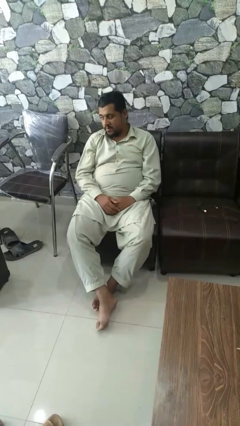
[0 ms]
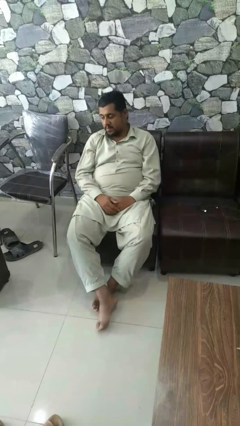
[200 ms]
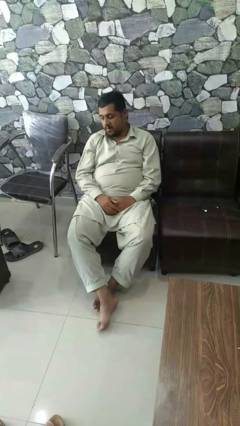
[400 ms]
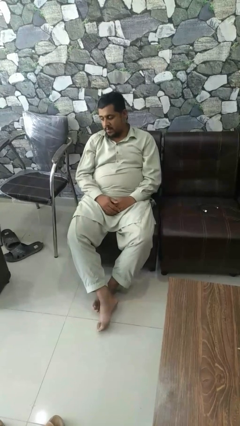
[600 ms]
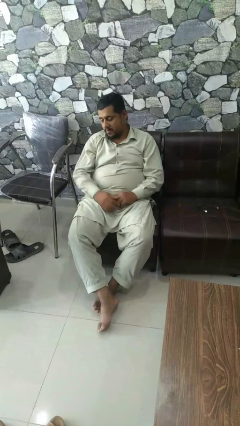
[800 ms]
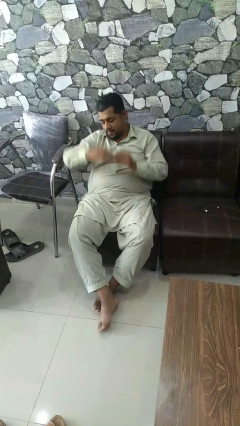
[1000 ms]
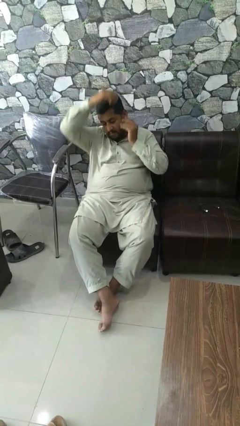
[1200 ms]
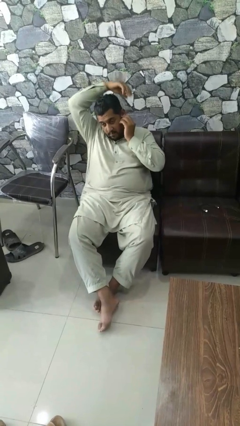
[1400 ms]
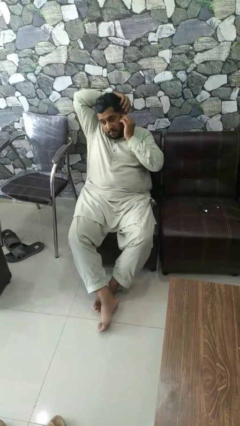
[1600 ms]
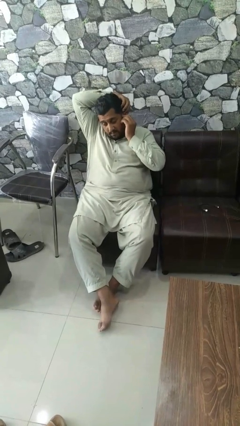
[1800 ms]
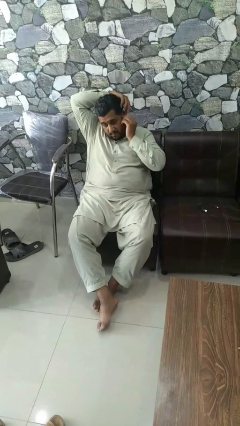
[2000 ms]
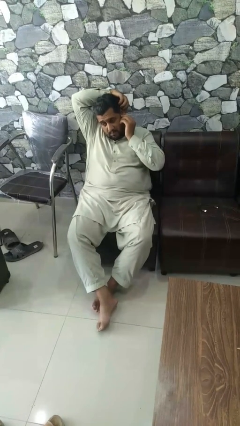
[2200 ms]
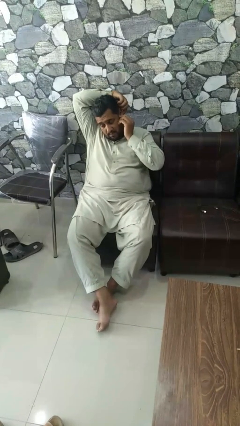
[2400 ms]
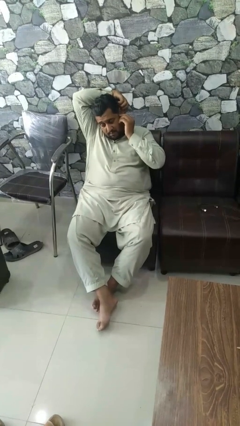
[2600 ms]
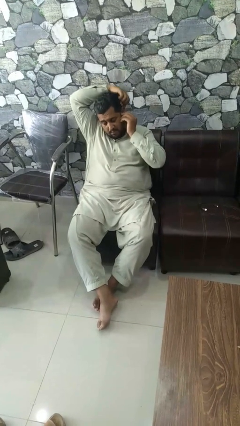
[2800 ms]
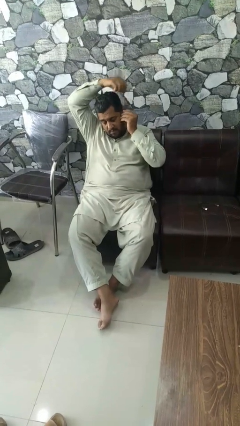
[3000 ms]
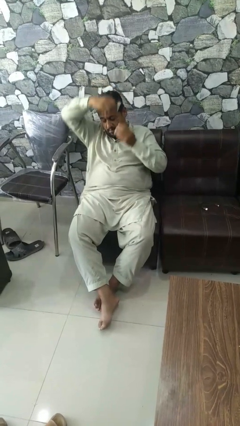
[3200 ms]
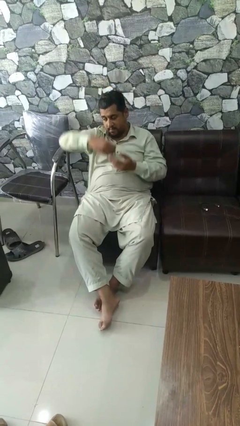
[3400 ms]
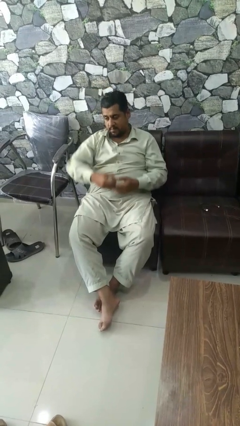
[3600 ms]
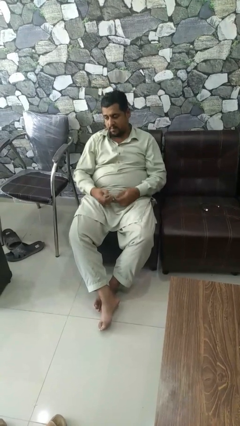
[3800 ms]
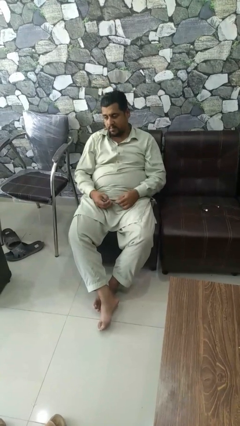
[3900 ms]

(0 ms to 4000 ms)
person takes off earrings

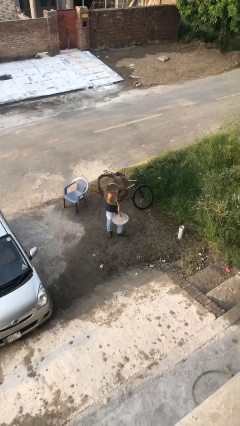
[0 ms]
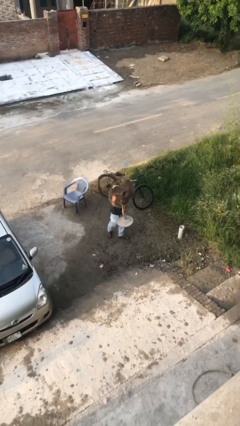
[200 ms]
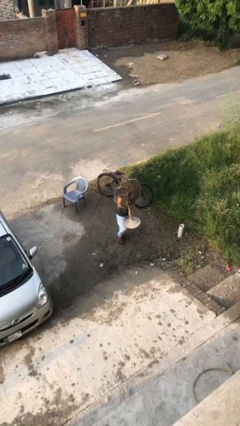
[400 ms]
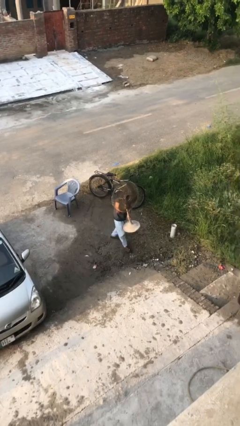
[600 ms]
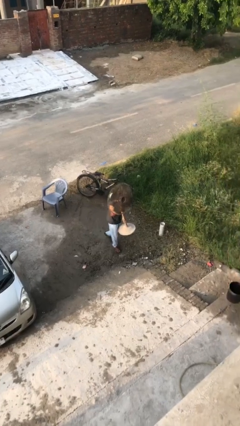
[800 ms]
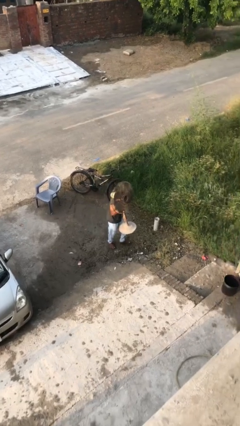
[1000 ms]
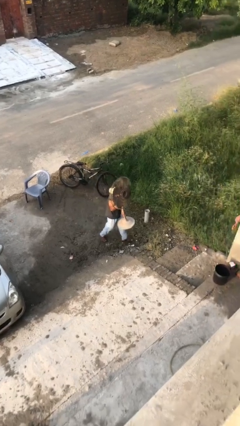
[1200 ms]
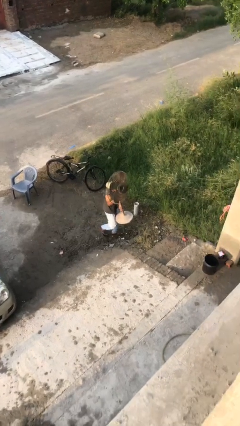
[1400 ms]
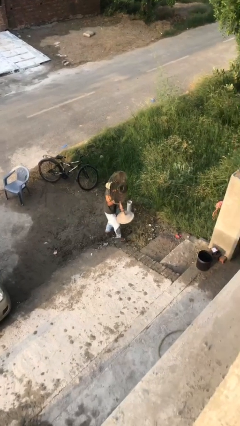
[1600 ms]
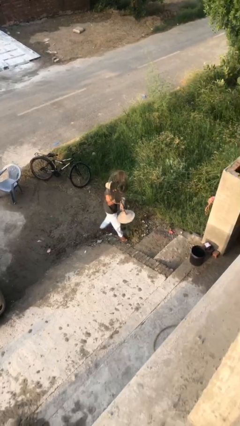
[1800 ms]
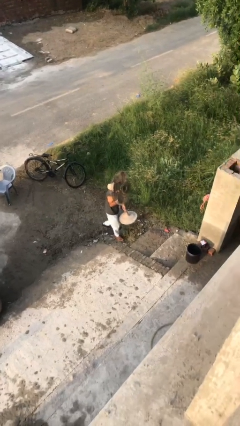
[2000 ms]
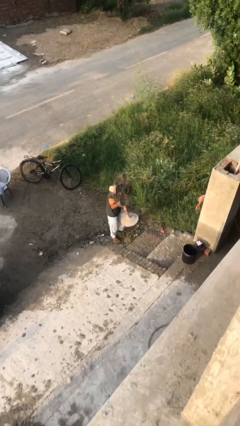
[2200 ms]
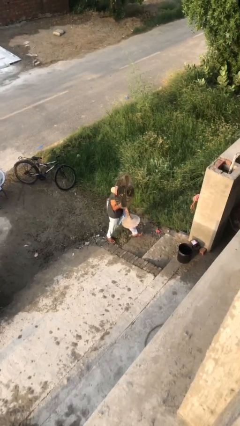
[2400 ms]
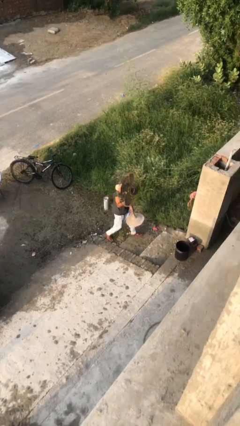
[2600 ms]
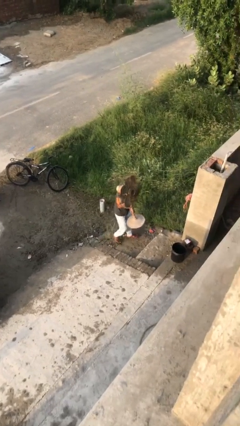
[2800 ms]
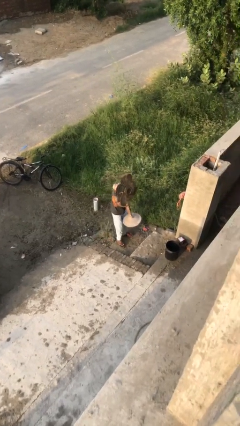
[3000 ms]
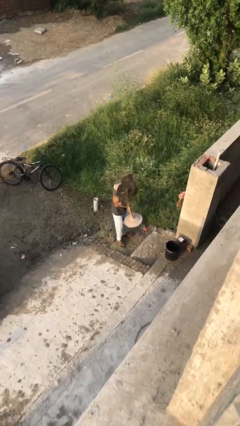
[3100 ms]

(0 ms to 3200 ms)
person carries heavy object

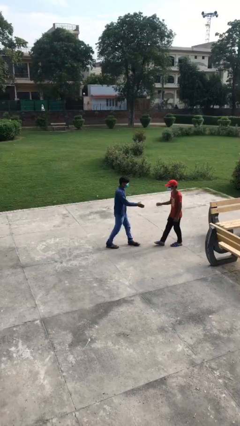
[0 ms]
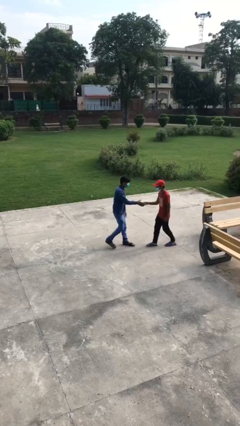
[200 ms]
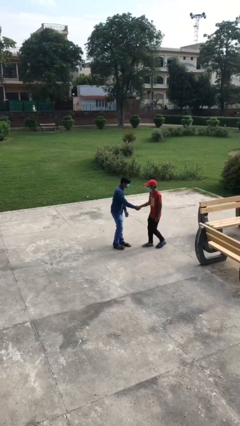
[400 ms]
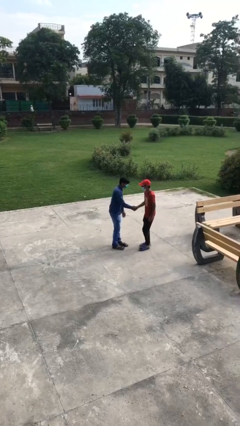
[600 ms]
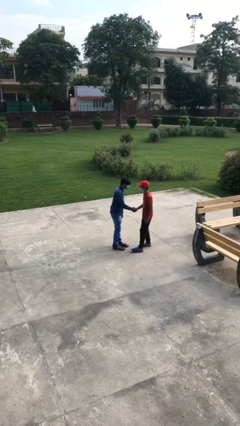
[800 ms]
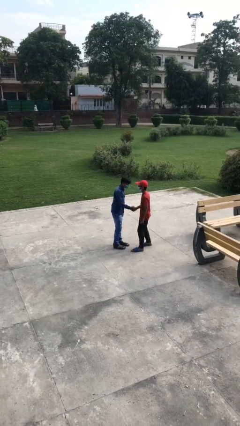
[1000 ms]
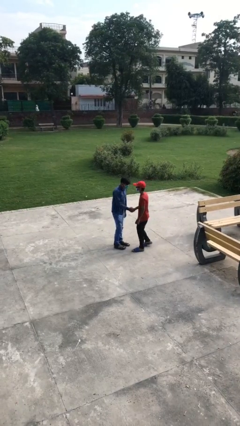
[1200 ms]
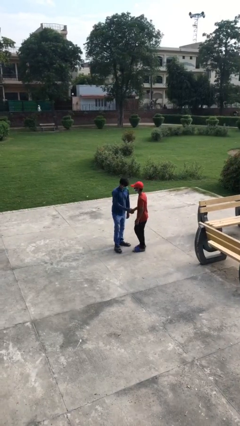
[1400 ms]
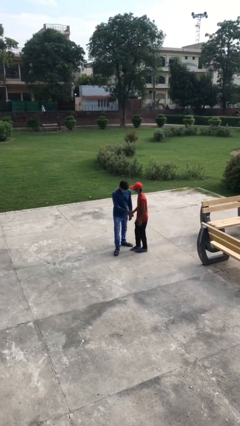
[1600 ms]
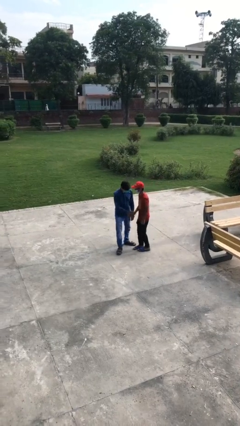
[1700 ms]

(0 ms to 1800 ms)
person shakes hand

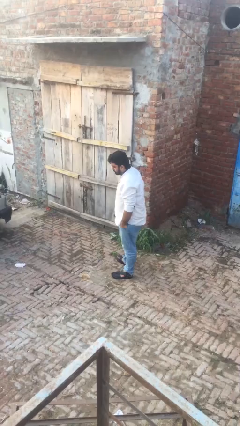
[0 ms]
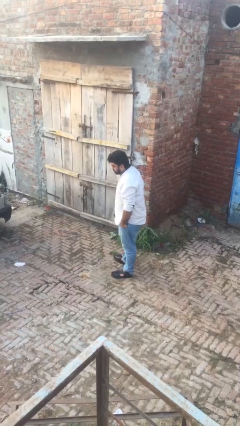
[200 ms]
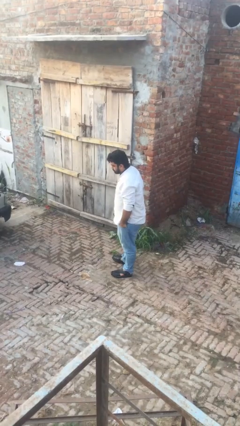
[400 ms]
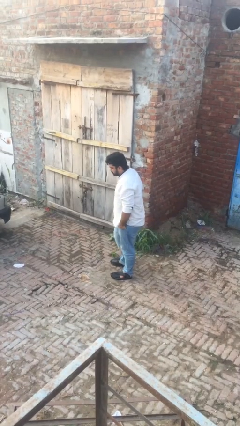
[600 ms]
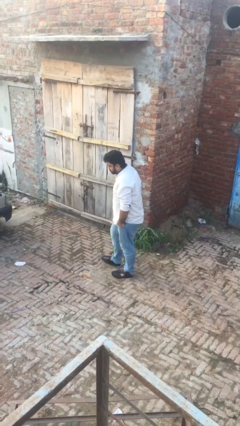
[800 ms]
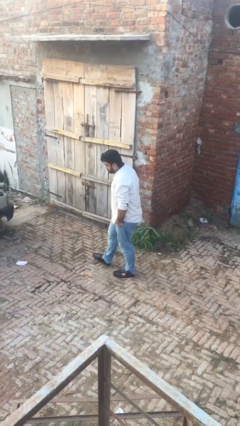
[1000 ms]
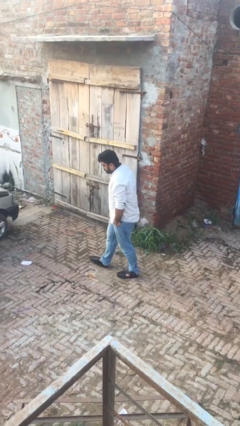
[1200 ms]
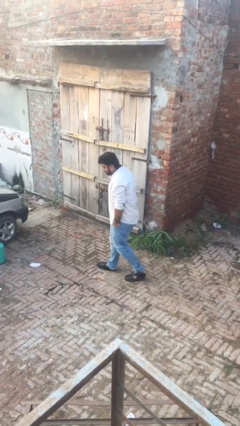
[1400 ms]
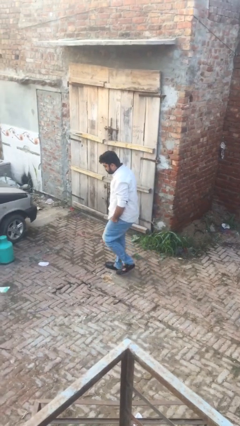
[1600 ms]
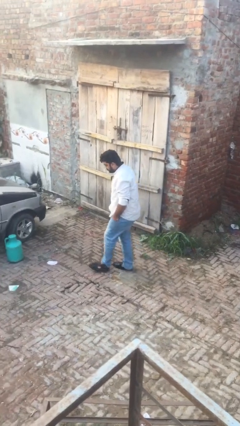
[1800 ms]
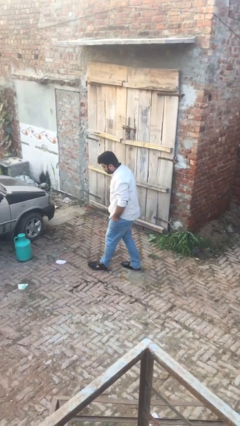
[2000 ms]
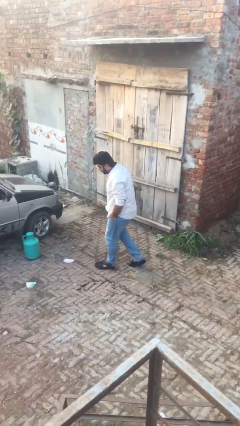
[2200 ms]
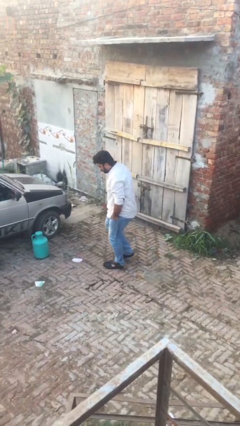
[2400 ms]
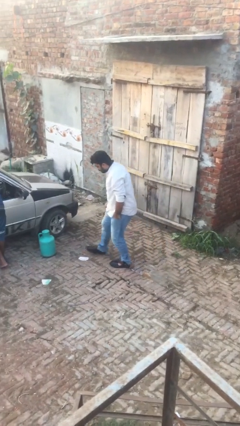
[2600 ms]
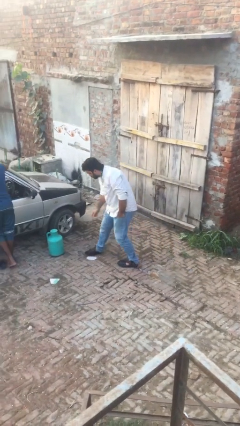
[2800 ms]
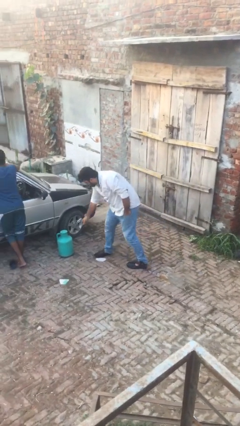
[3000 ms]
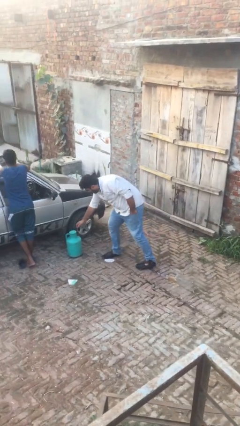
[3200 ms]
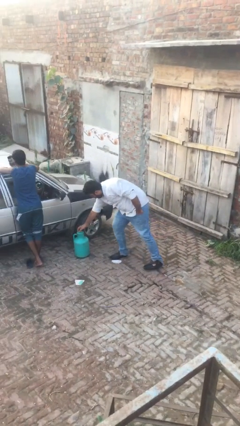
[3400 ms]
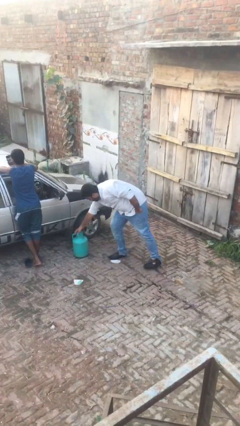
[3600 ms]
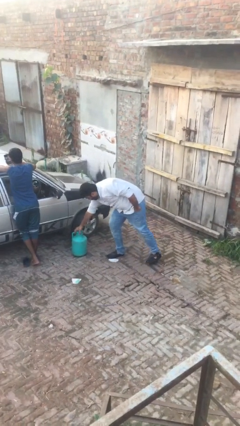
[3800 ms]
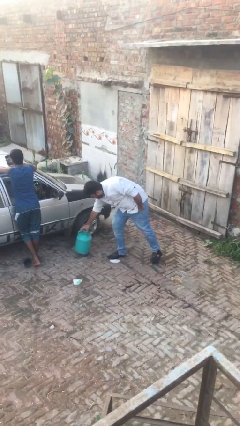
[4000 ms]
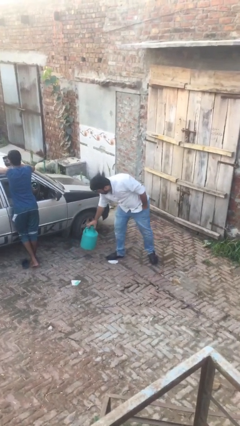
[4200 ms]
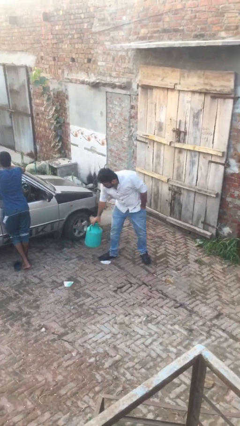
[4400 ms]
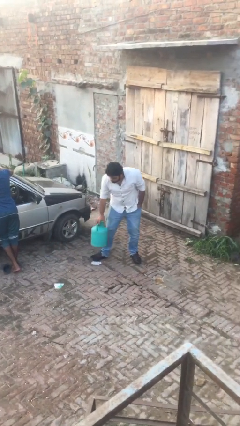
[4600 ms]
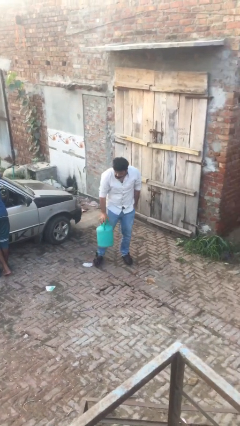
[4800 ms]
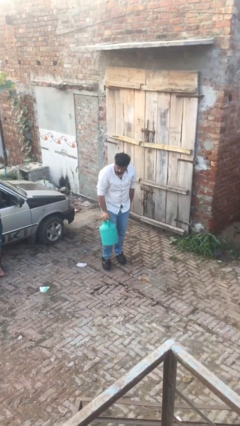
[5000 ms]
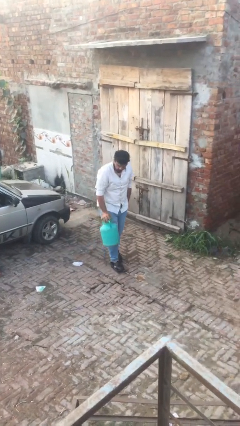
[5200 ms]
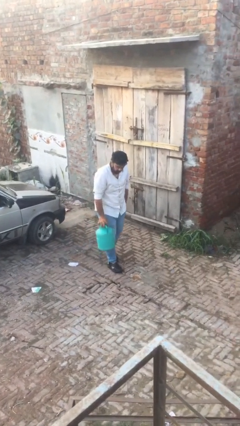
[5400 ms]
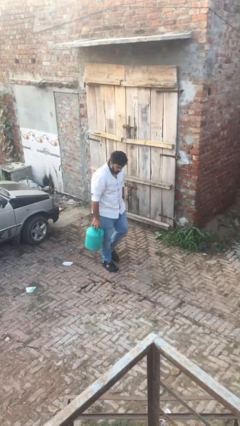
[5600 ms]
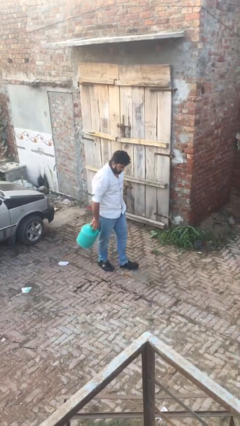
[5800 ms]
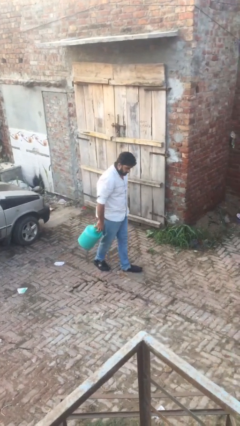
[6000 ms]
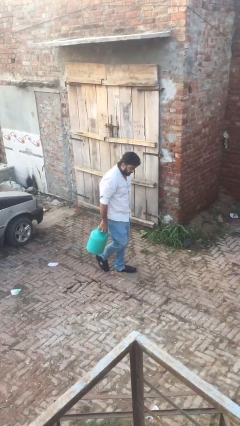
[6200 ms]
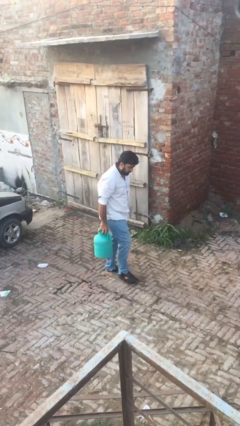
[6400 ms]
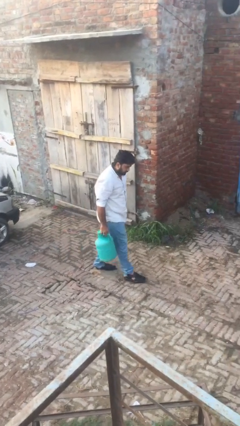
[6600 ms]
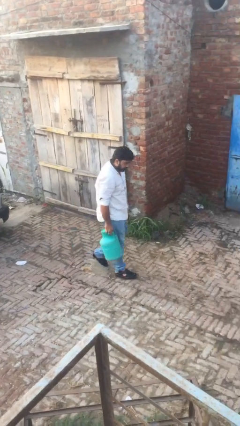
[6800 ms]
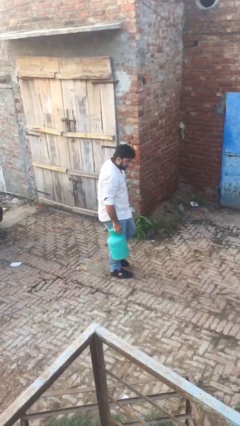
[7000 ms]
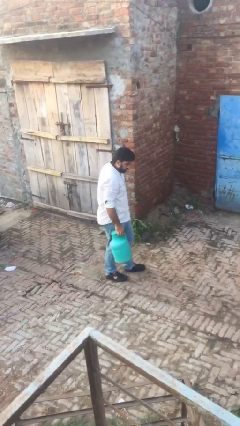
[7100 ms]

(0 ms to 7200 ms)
person steals object from person

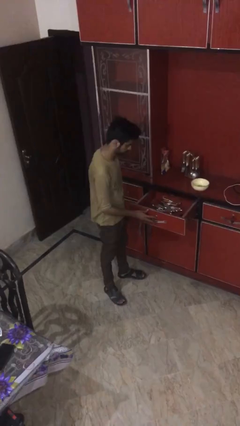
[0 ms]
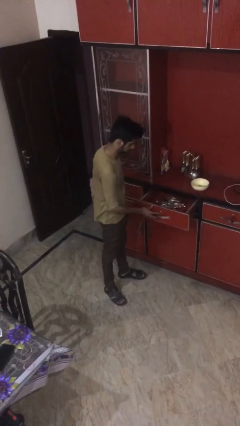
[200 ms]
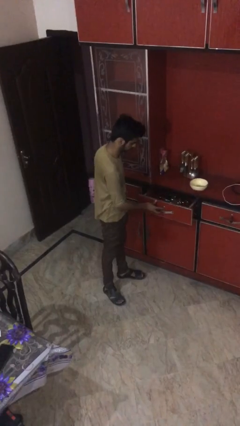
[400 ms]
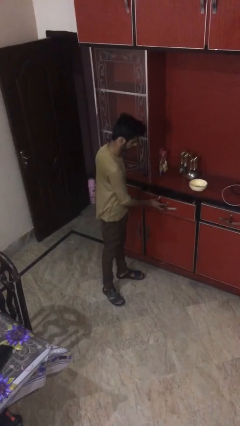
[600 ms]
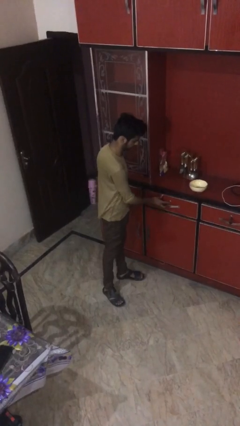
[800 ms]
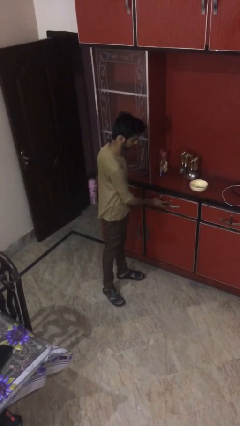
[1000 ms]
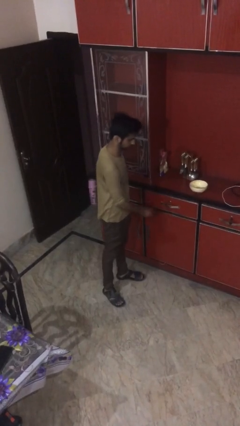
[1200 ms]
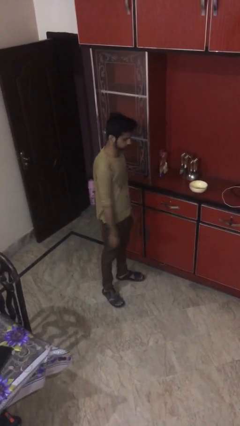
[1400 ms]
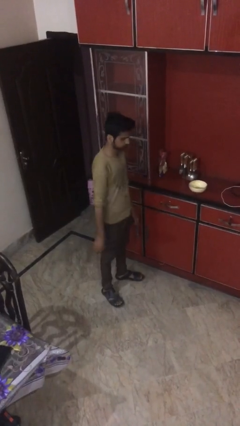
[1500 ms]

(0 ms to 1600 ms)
person closes kitchen drawer
